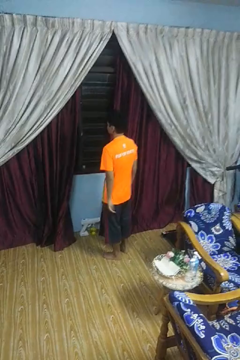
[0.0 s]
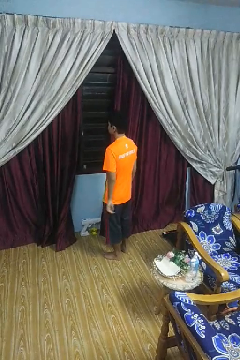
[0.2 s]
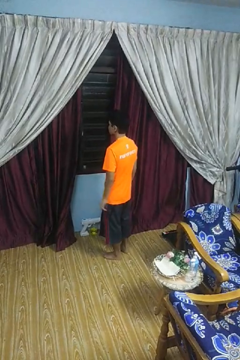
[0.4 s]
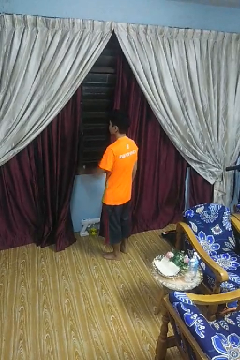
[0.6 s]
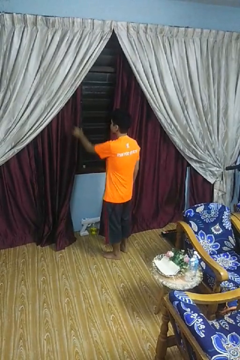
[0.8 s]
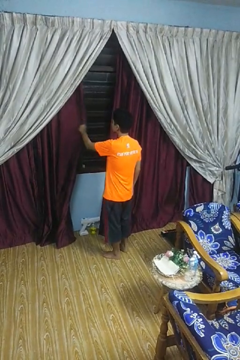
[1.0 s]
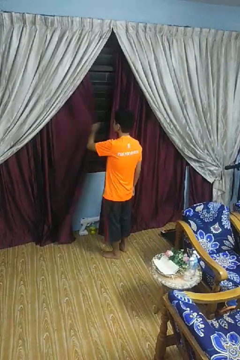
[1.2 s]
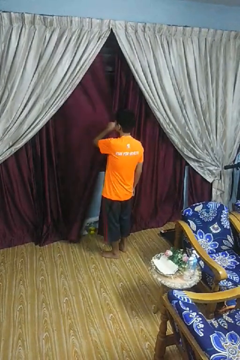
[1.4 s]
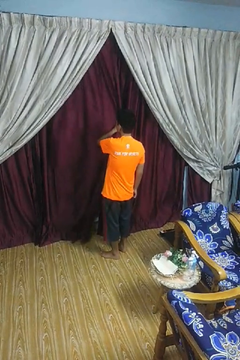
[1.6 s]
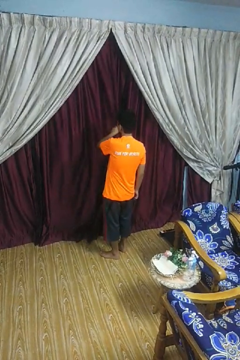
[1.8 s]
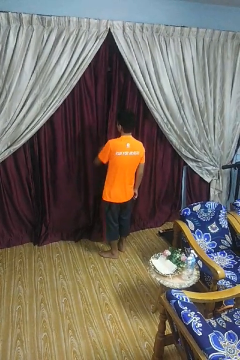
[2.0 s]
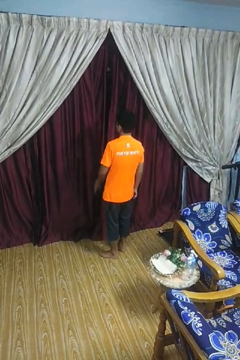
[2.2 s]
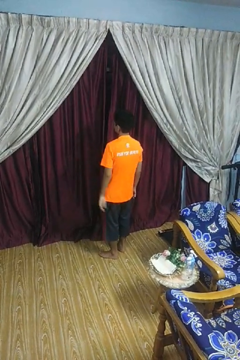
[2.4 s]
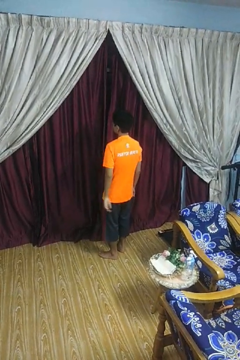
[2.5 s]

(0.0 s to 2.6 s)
person closes curtains

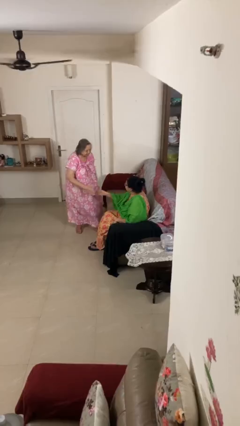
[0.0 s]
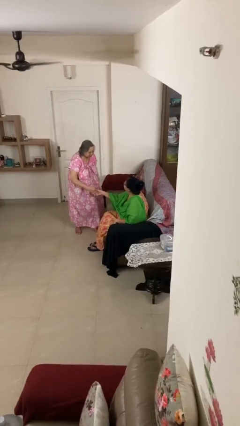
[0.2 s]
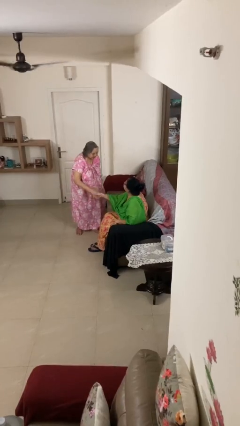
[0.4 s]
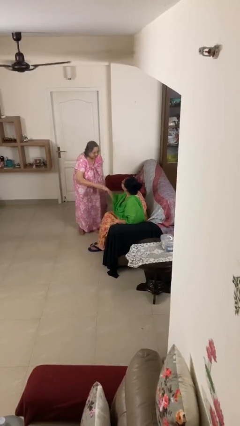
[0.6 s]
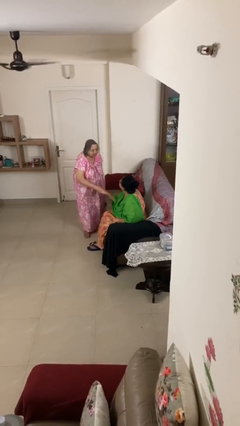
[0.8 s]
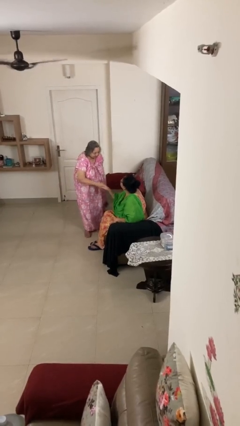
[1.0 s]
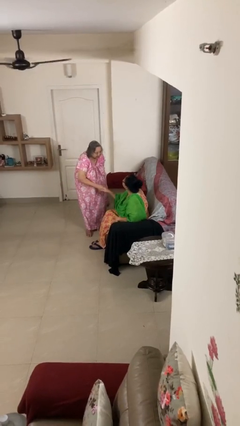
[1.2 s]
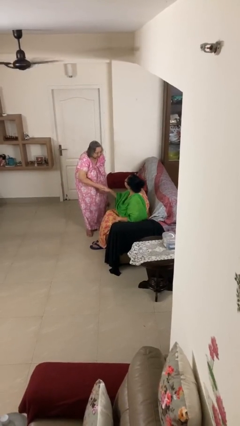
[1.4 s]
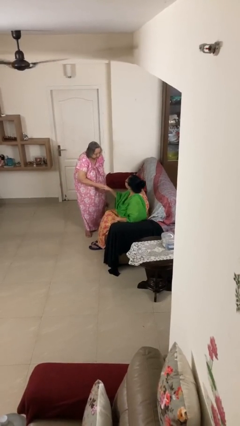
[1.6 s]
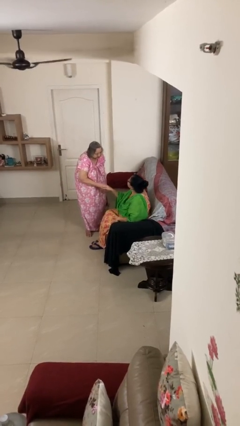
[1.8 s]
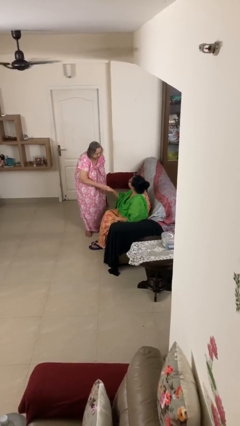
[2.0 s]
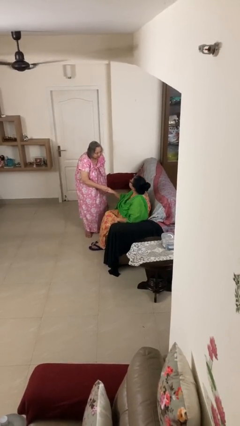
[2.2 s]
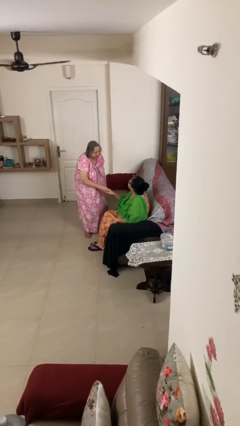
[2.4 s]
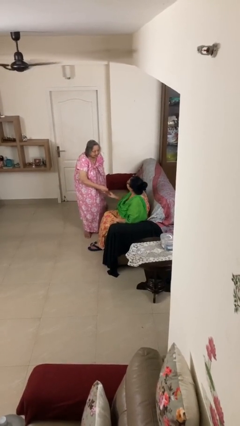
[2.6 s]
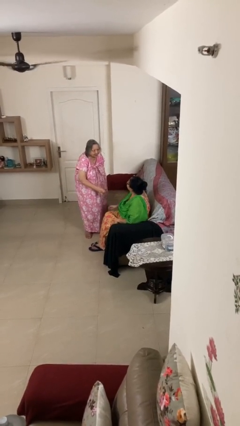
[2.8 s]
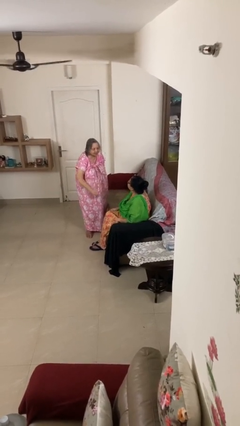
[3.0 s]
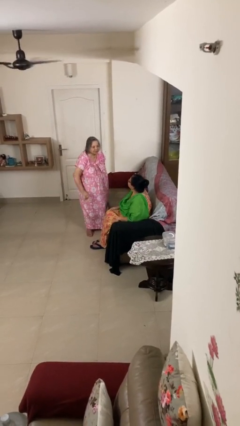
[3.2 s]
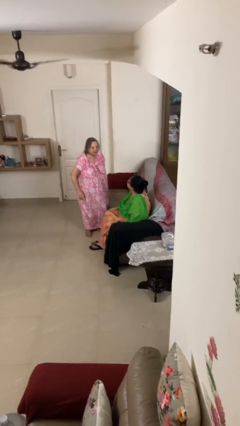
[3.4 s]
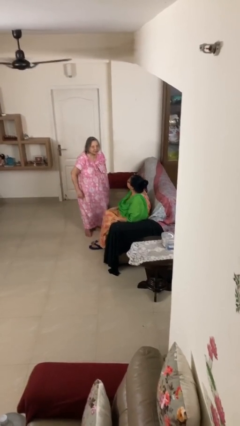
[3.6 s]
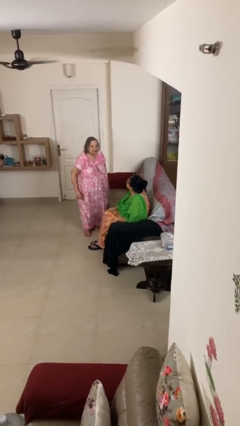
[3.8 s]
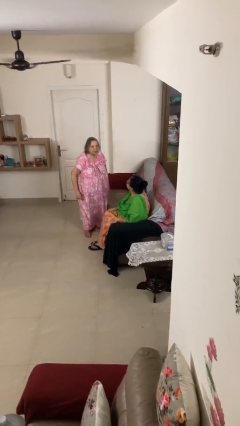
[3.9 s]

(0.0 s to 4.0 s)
person shakes hand

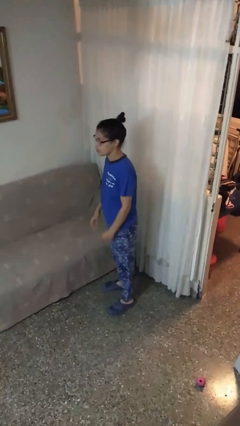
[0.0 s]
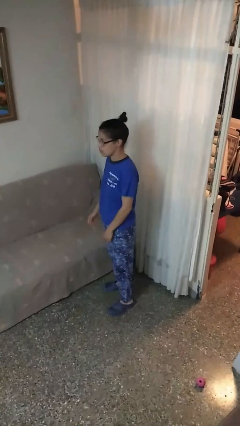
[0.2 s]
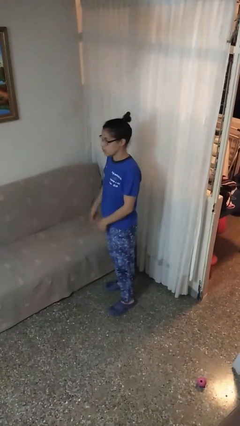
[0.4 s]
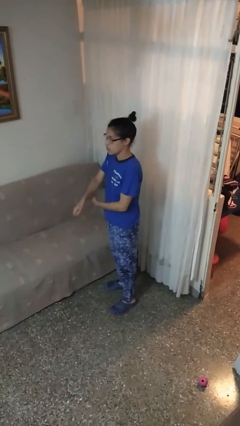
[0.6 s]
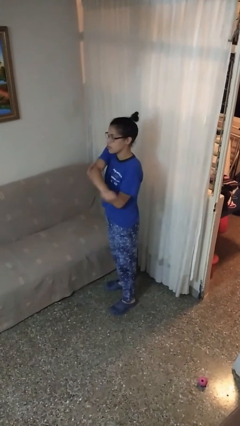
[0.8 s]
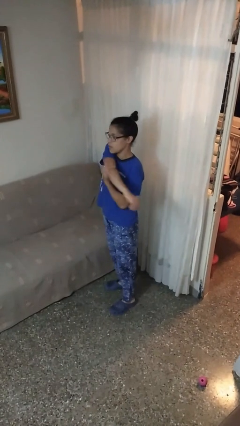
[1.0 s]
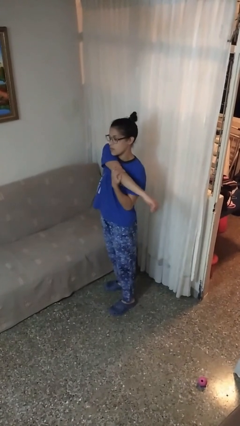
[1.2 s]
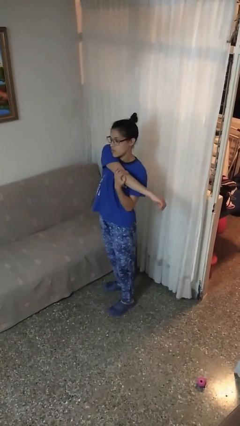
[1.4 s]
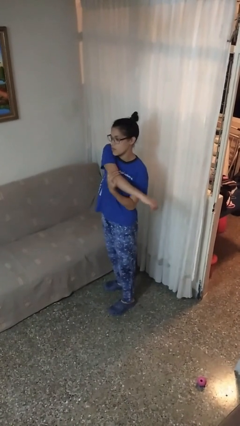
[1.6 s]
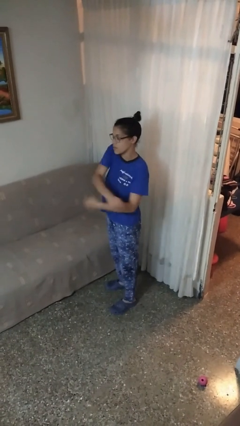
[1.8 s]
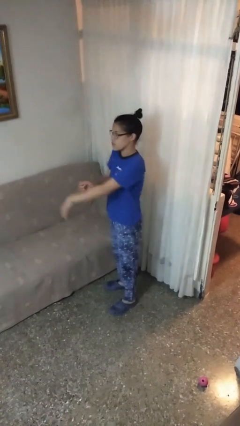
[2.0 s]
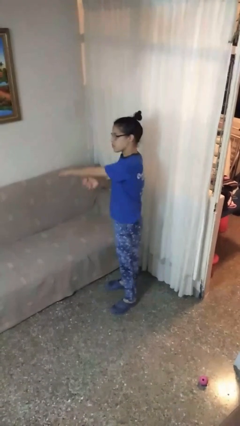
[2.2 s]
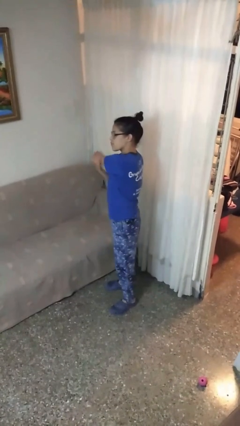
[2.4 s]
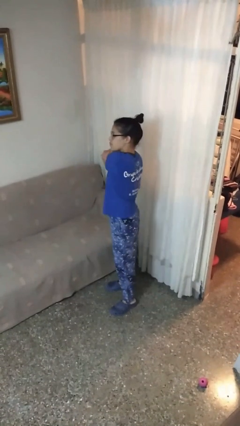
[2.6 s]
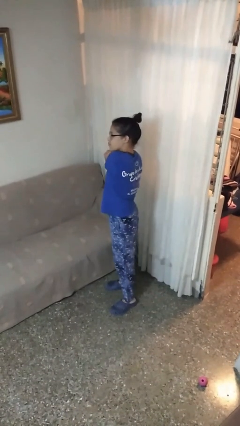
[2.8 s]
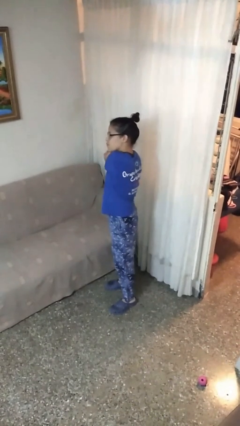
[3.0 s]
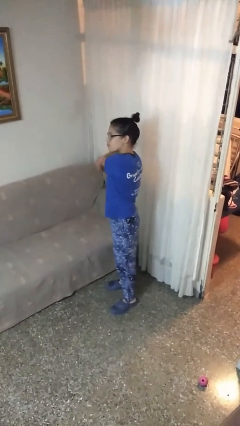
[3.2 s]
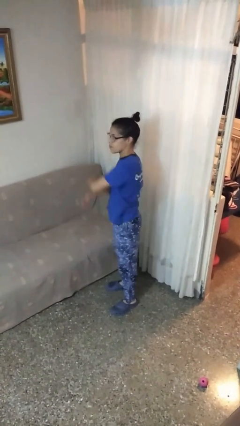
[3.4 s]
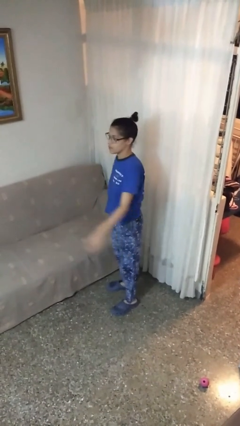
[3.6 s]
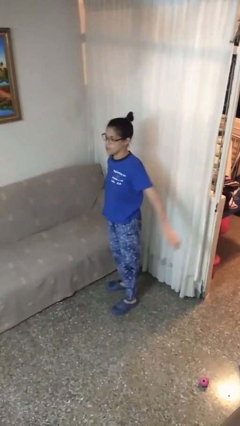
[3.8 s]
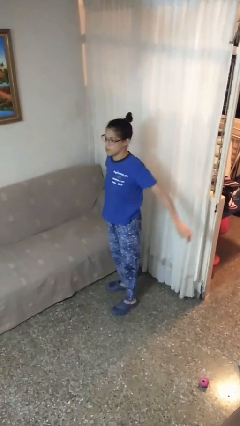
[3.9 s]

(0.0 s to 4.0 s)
person stretches arms to side

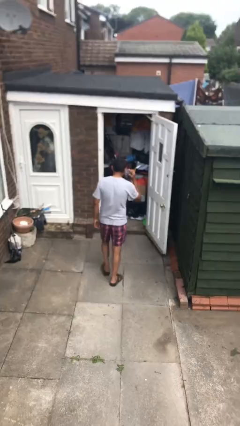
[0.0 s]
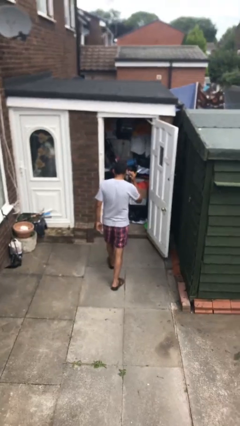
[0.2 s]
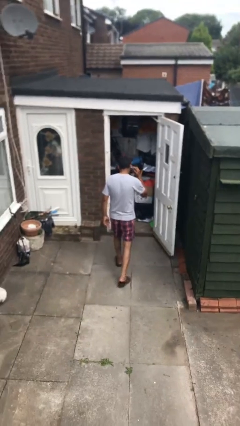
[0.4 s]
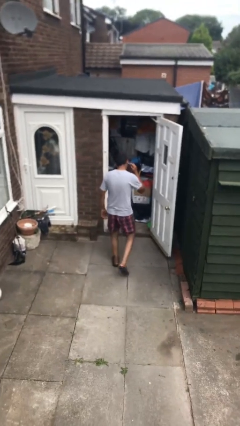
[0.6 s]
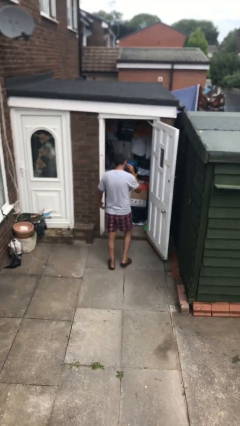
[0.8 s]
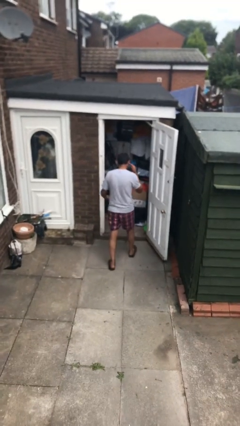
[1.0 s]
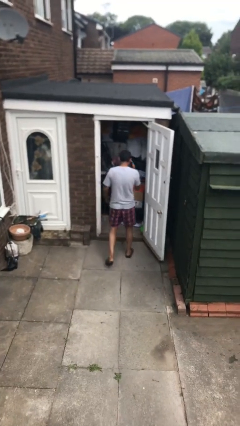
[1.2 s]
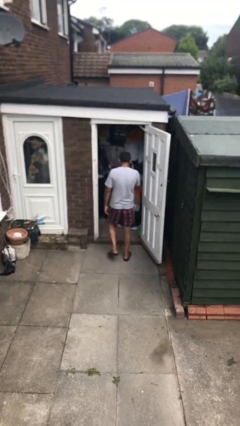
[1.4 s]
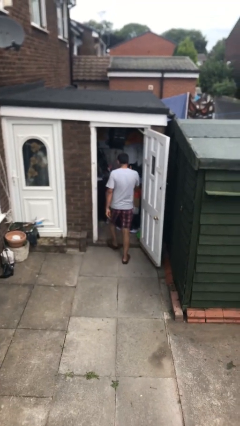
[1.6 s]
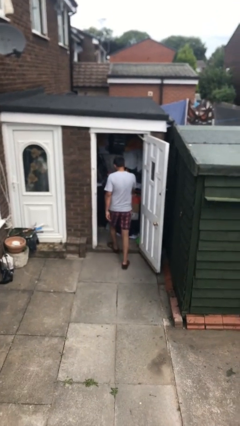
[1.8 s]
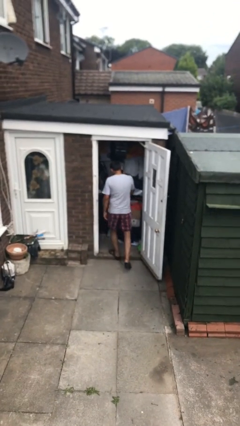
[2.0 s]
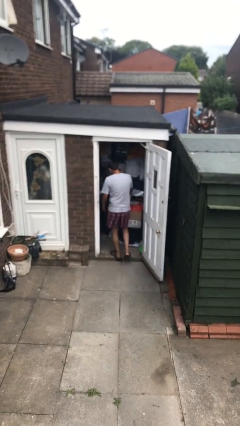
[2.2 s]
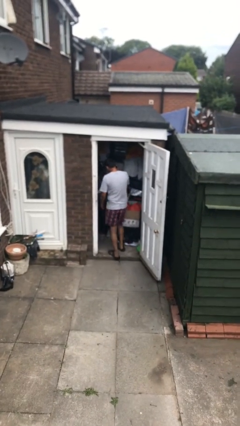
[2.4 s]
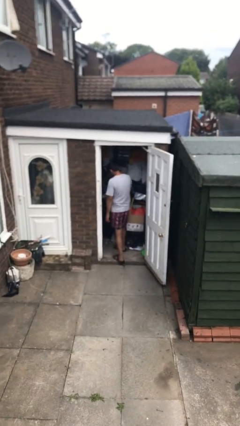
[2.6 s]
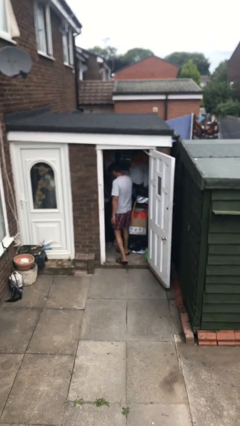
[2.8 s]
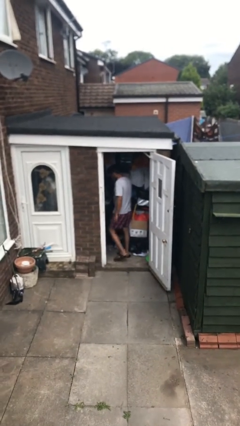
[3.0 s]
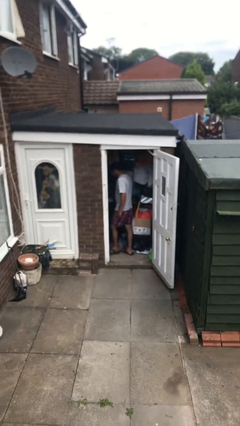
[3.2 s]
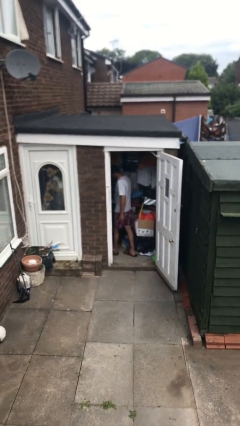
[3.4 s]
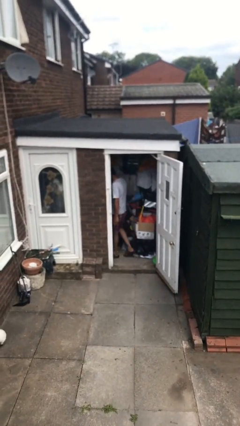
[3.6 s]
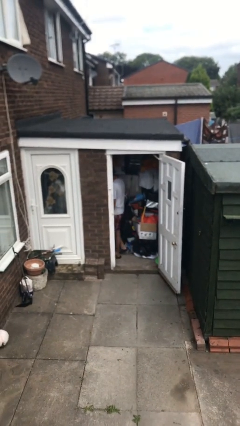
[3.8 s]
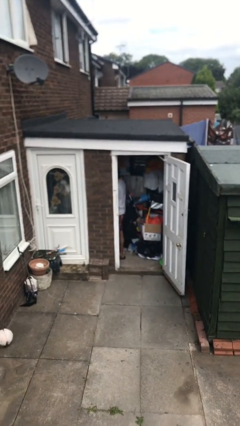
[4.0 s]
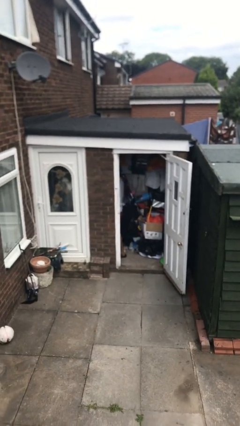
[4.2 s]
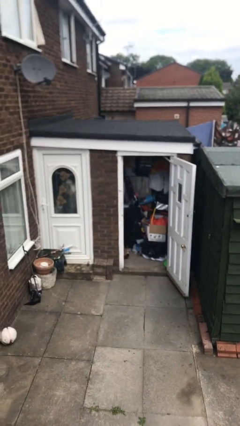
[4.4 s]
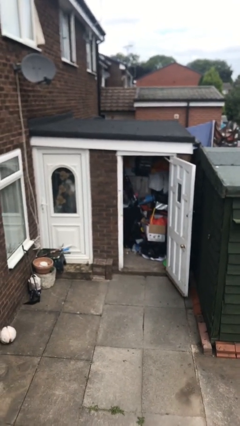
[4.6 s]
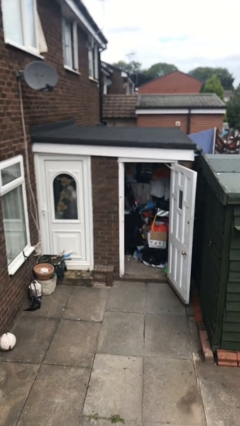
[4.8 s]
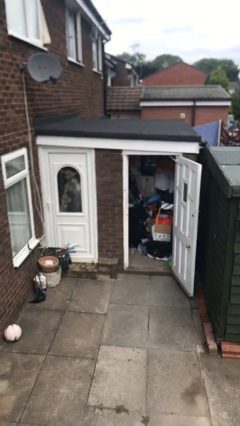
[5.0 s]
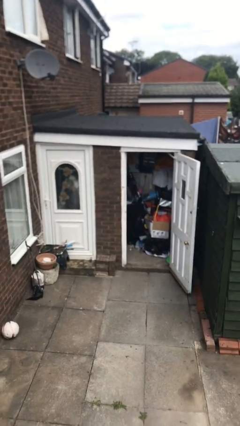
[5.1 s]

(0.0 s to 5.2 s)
person exits scene through structure

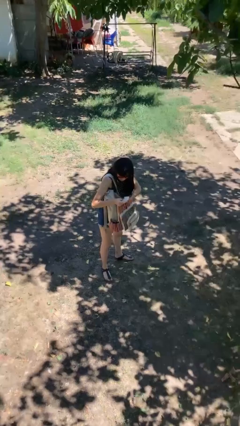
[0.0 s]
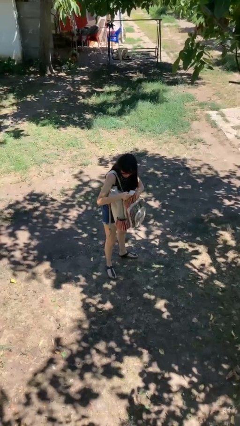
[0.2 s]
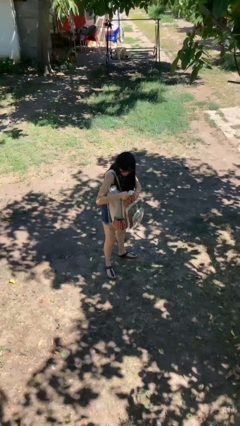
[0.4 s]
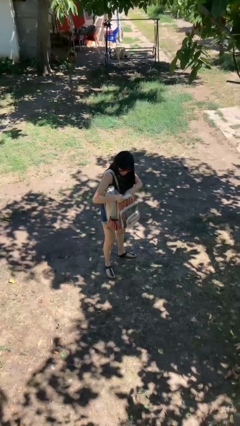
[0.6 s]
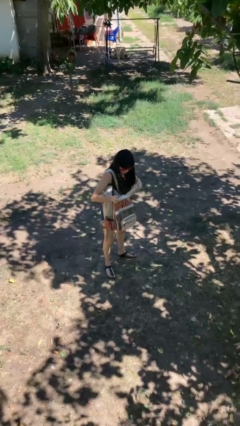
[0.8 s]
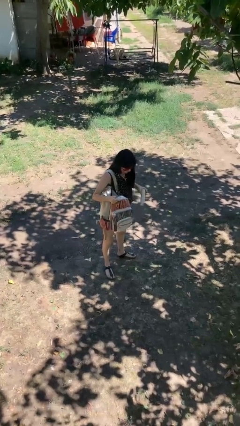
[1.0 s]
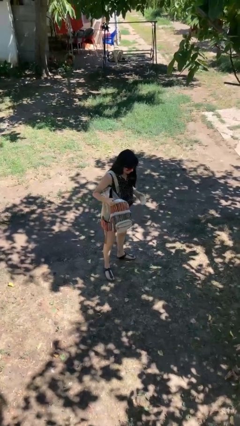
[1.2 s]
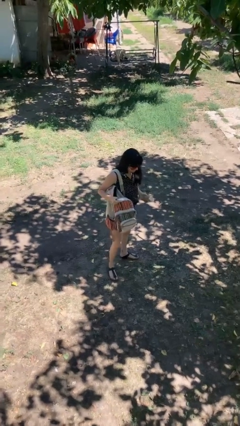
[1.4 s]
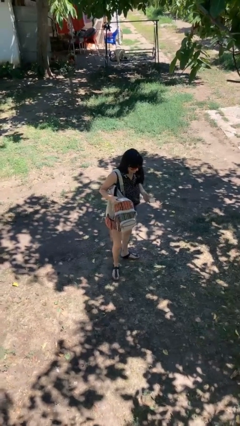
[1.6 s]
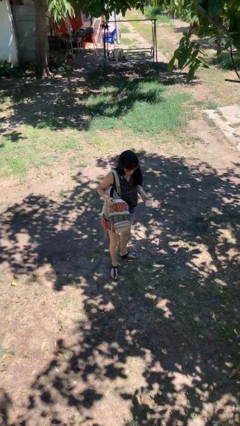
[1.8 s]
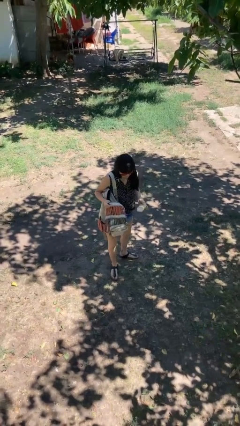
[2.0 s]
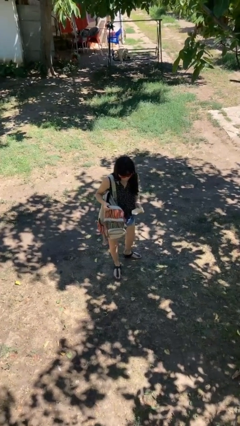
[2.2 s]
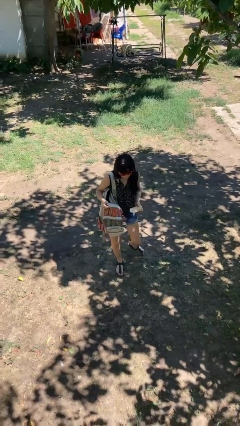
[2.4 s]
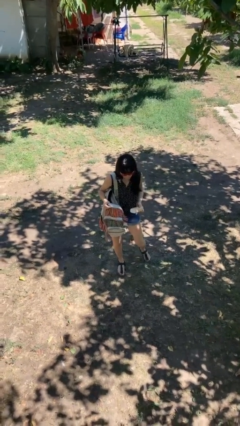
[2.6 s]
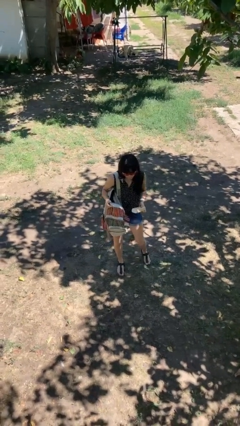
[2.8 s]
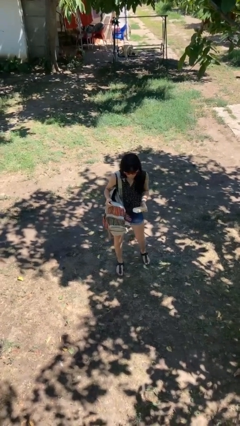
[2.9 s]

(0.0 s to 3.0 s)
person takes object from backpack
